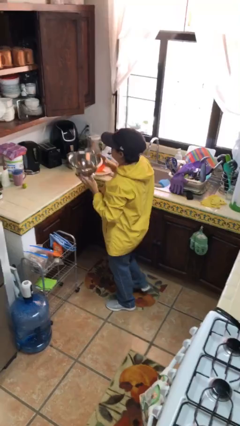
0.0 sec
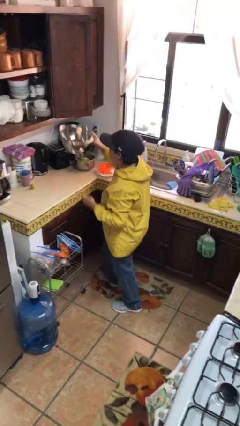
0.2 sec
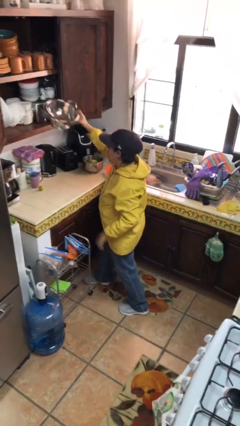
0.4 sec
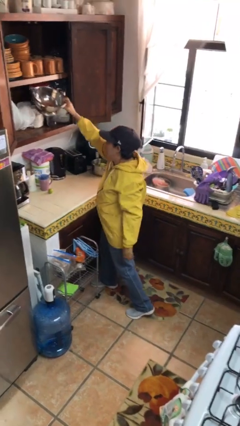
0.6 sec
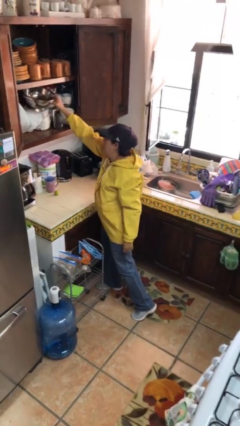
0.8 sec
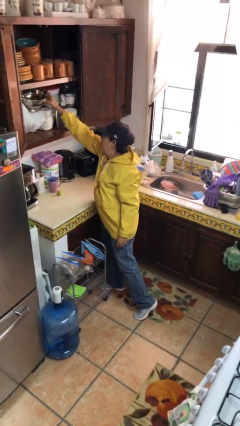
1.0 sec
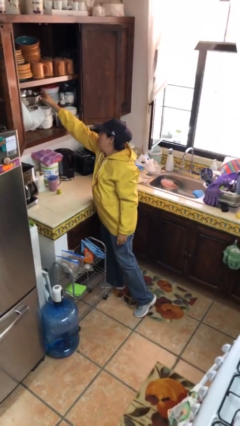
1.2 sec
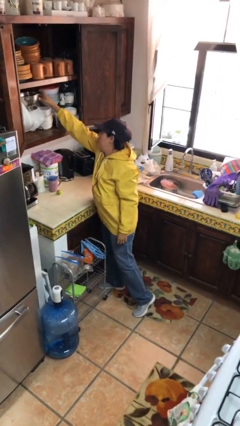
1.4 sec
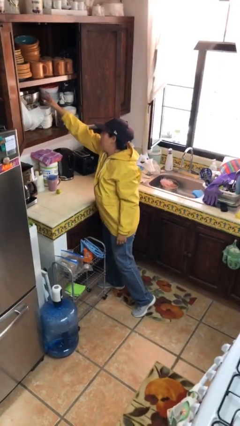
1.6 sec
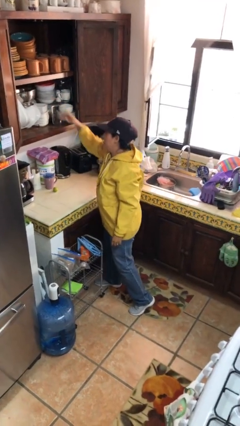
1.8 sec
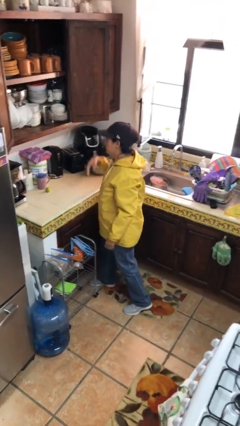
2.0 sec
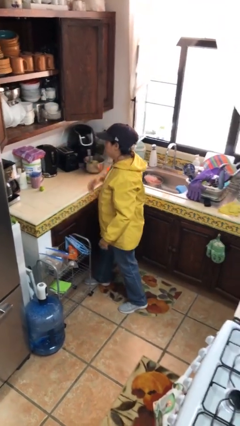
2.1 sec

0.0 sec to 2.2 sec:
person puts down object into cabinet

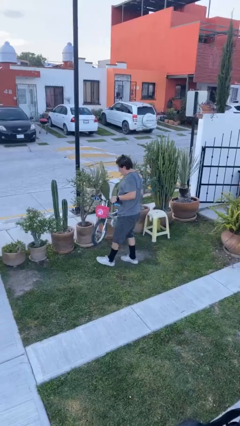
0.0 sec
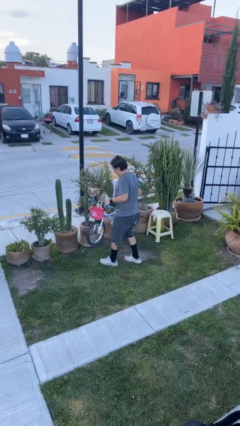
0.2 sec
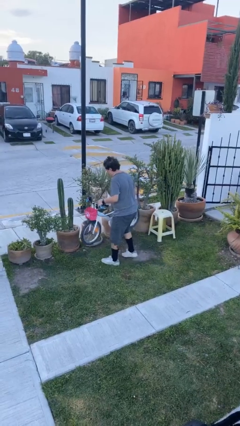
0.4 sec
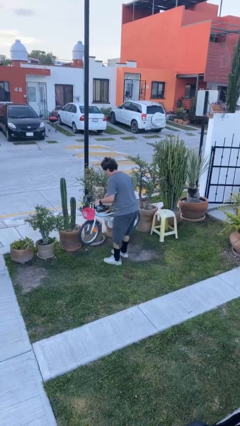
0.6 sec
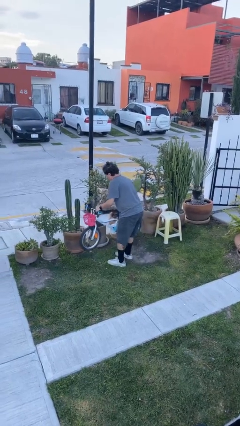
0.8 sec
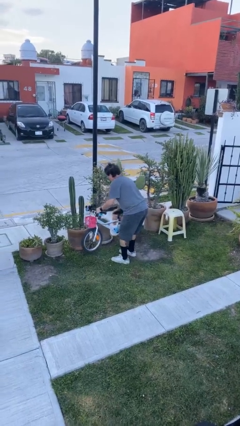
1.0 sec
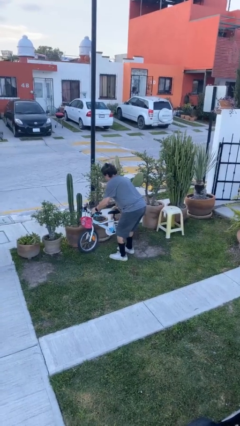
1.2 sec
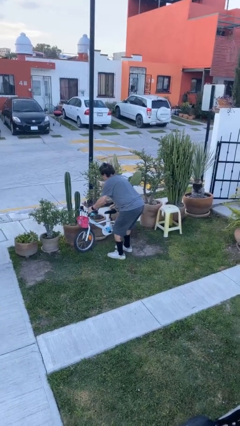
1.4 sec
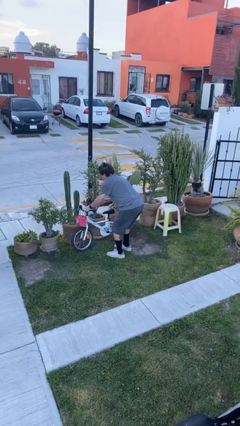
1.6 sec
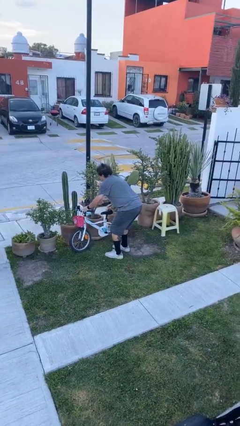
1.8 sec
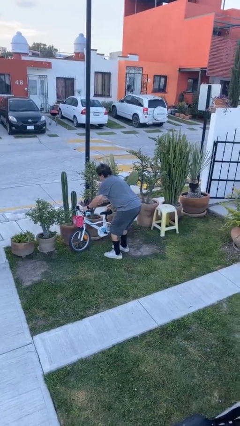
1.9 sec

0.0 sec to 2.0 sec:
person puts down object on floor

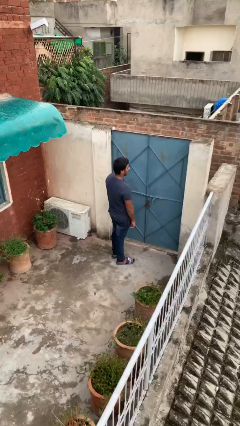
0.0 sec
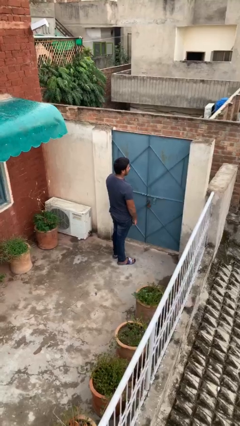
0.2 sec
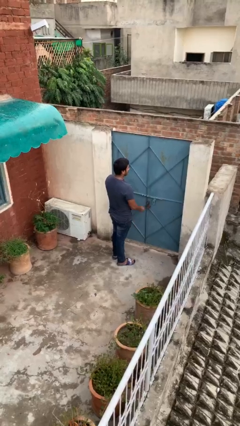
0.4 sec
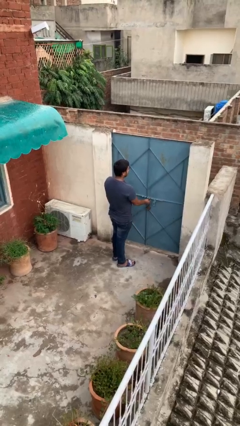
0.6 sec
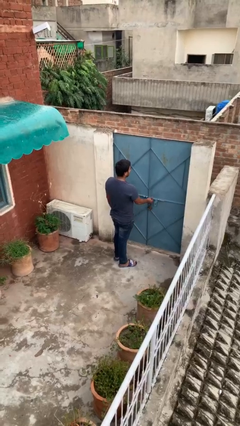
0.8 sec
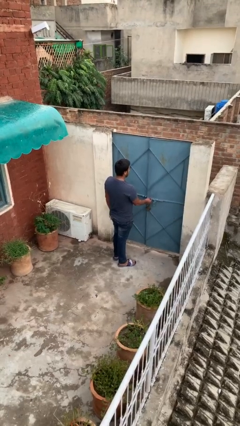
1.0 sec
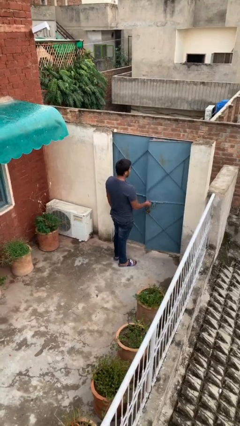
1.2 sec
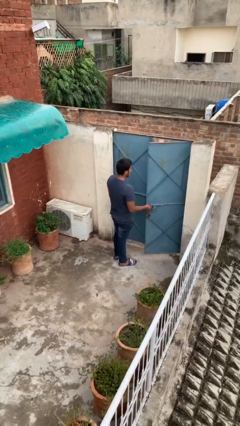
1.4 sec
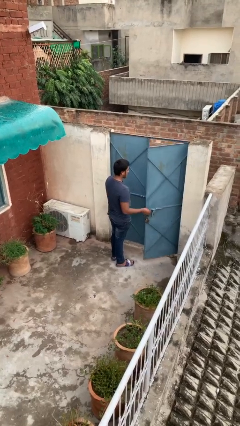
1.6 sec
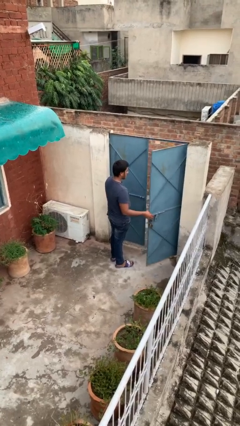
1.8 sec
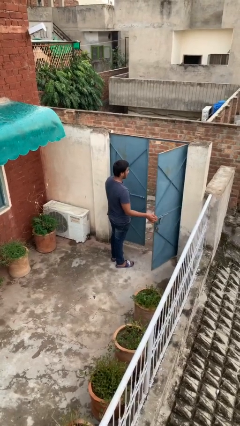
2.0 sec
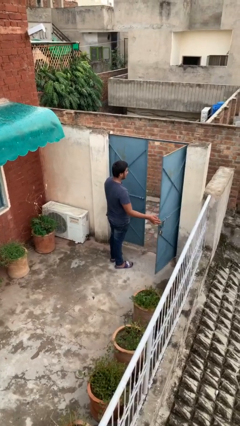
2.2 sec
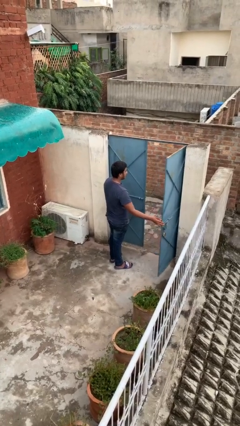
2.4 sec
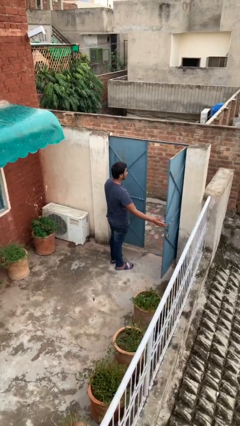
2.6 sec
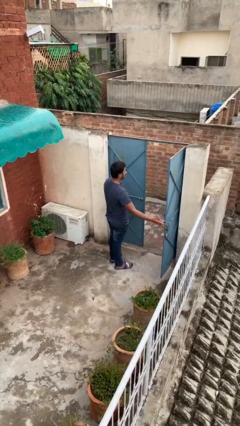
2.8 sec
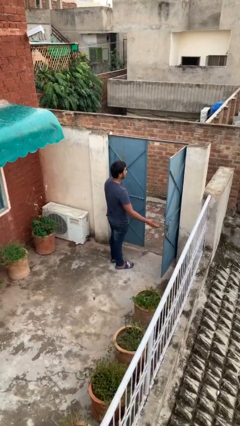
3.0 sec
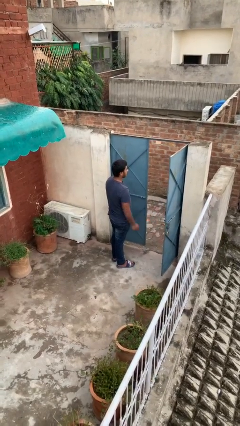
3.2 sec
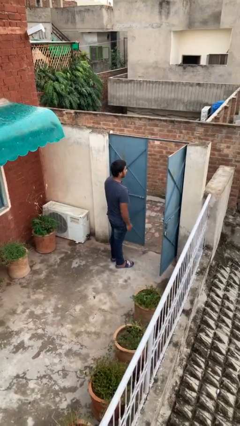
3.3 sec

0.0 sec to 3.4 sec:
person opens facility door

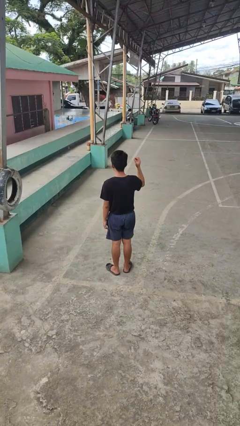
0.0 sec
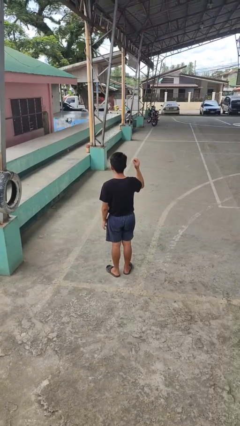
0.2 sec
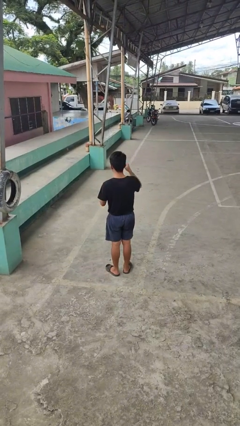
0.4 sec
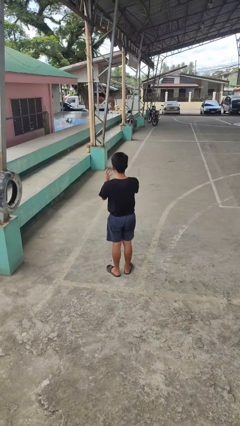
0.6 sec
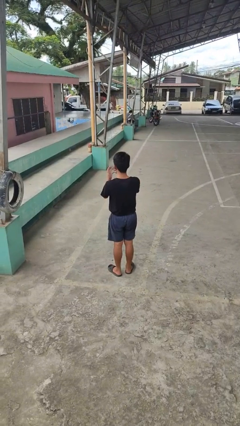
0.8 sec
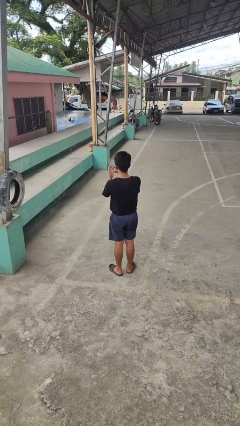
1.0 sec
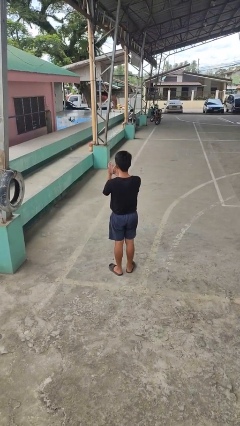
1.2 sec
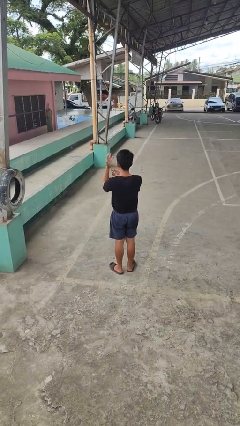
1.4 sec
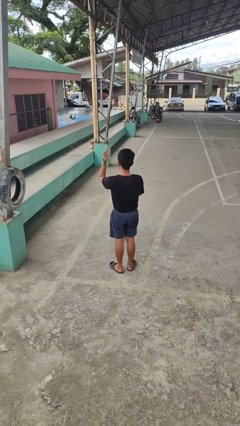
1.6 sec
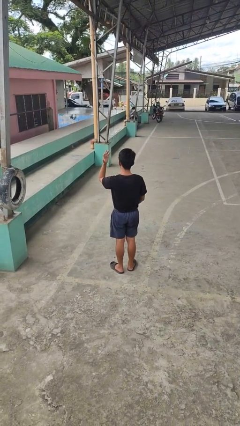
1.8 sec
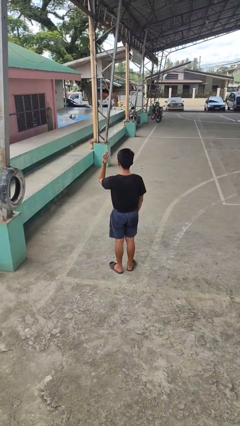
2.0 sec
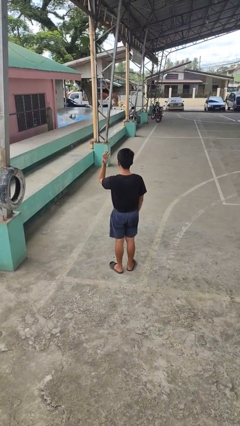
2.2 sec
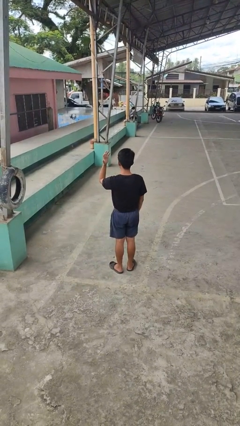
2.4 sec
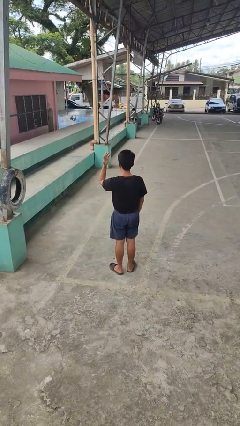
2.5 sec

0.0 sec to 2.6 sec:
person puts on ring

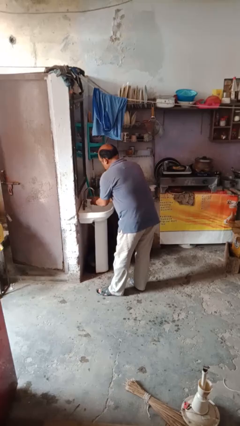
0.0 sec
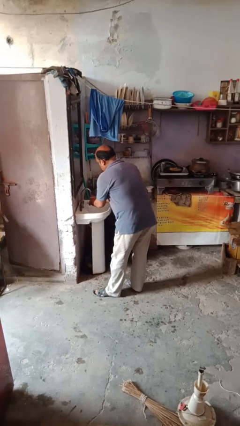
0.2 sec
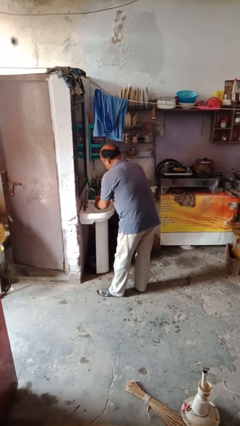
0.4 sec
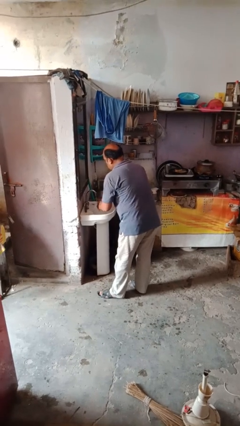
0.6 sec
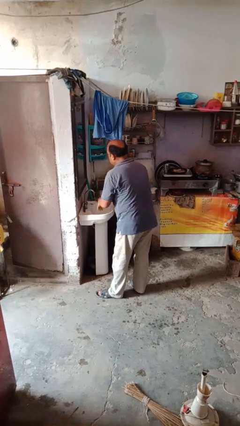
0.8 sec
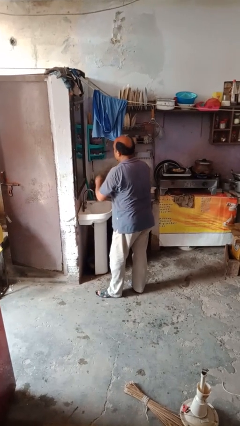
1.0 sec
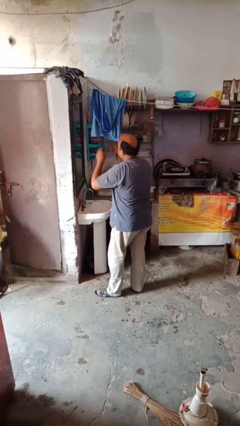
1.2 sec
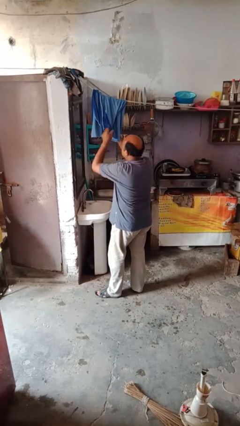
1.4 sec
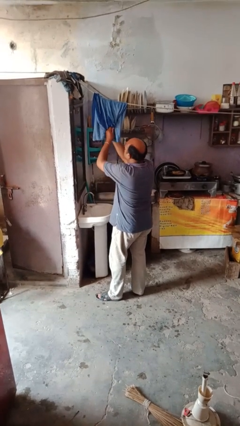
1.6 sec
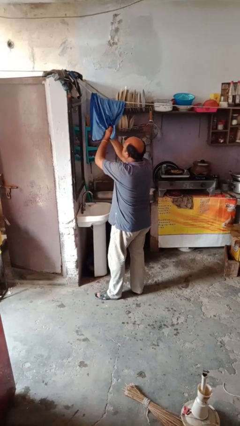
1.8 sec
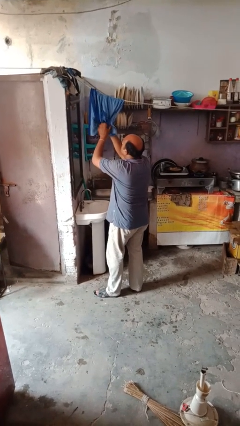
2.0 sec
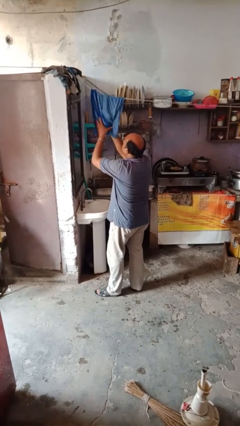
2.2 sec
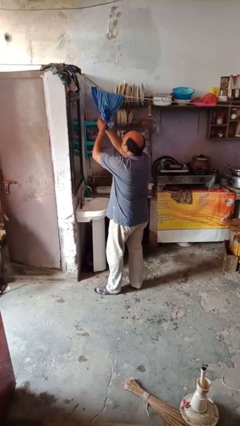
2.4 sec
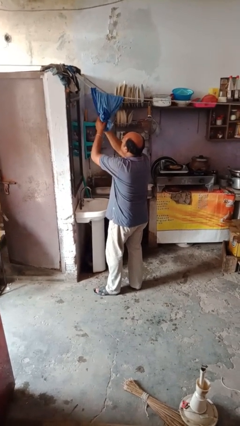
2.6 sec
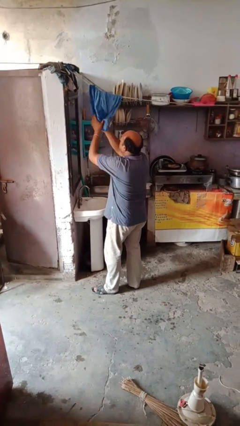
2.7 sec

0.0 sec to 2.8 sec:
person dries hands with towel

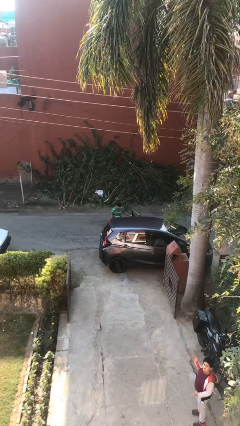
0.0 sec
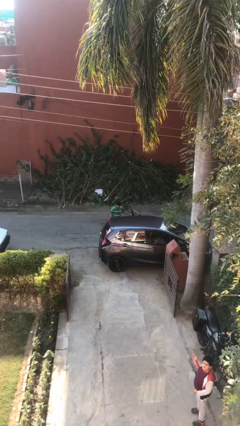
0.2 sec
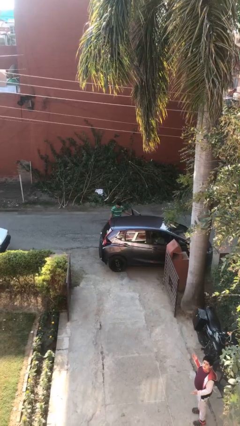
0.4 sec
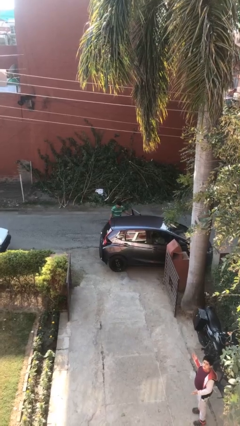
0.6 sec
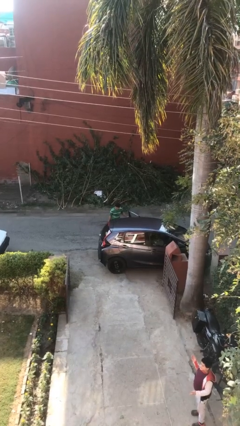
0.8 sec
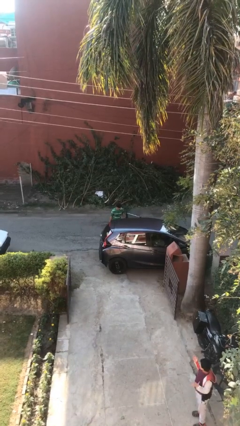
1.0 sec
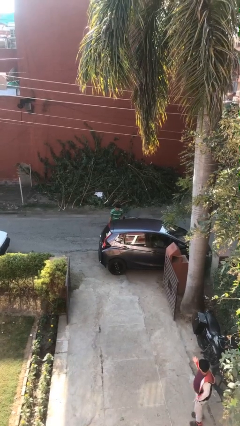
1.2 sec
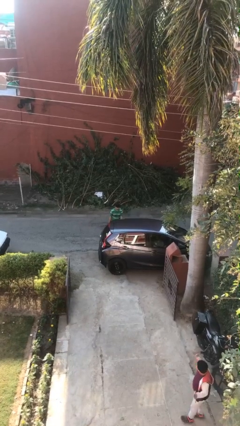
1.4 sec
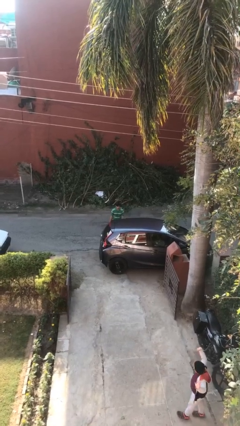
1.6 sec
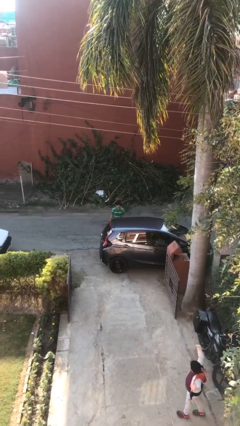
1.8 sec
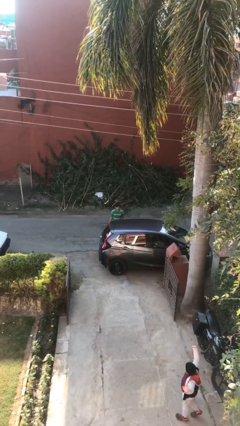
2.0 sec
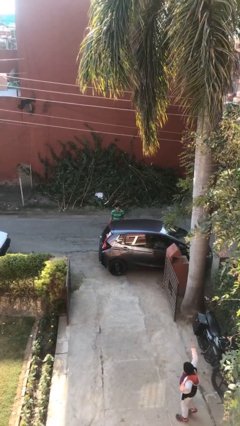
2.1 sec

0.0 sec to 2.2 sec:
person closes car door

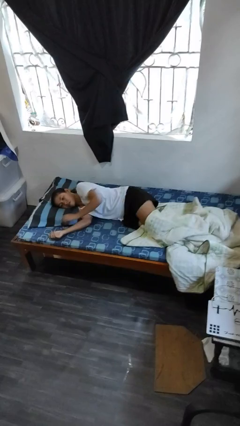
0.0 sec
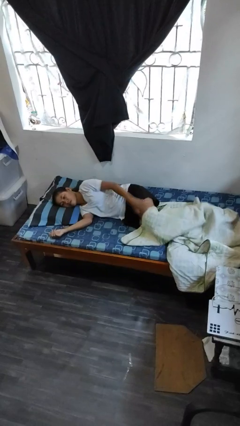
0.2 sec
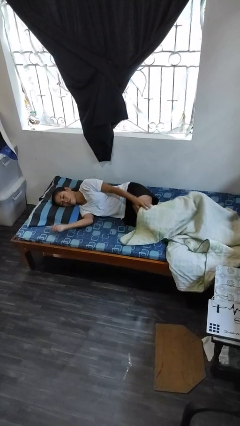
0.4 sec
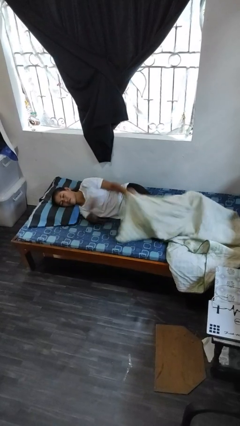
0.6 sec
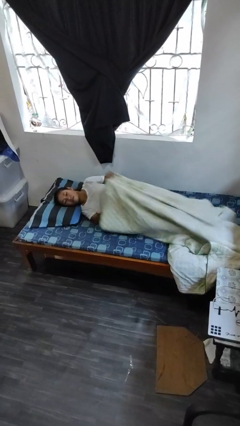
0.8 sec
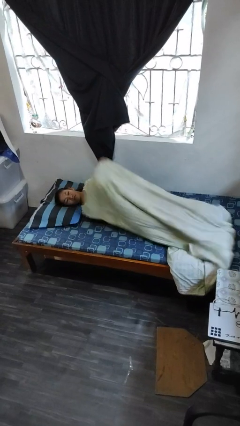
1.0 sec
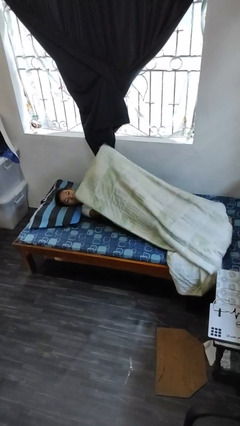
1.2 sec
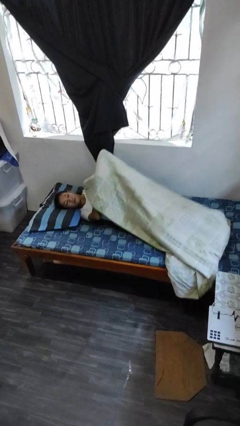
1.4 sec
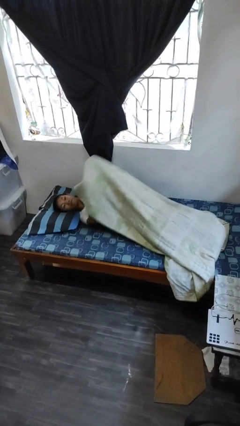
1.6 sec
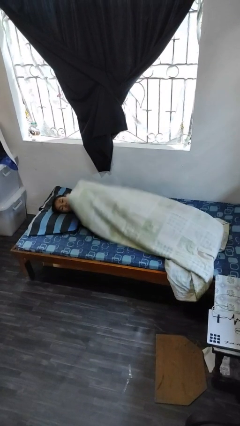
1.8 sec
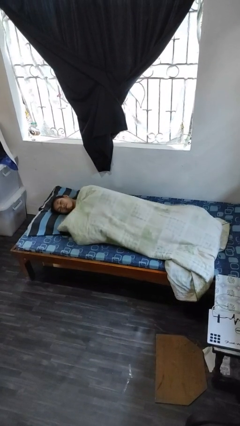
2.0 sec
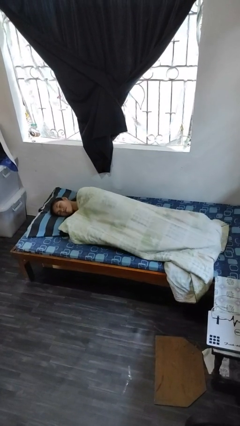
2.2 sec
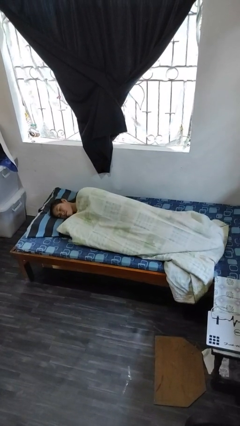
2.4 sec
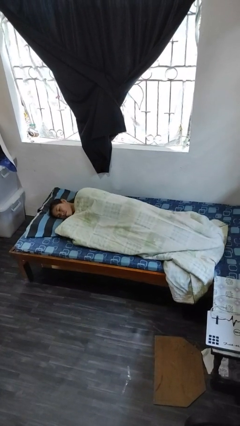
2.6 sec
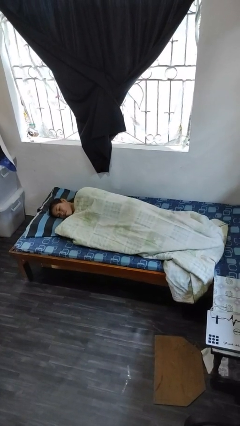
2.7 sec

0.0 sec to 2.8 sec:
person covers with bedsheets
